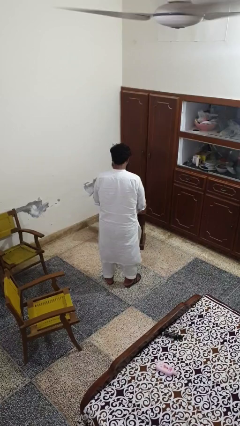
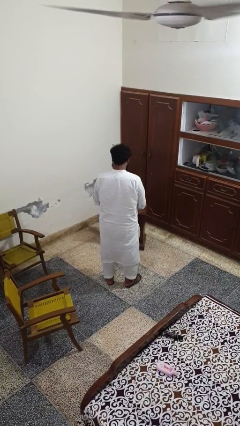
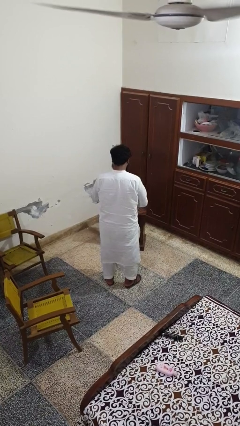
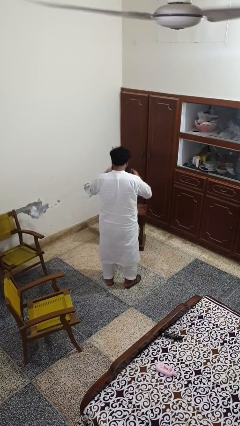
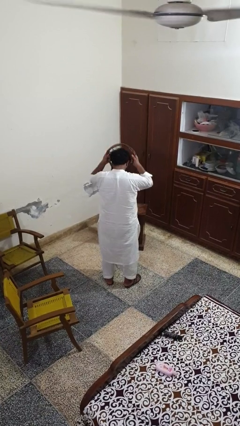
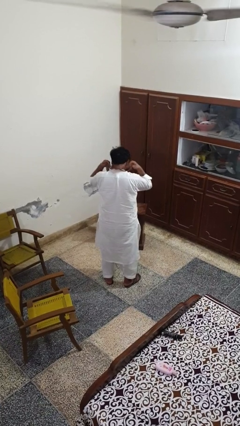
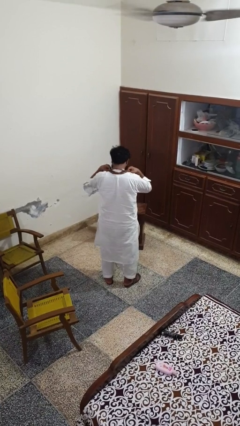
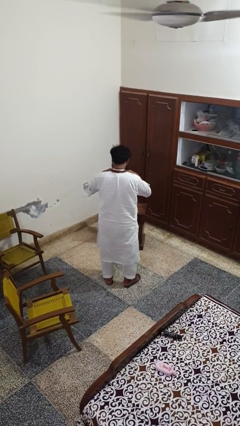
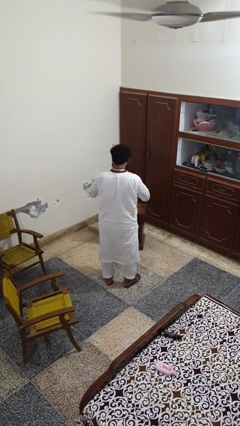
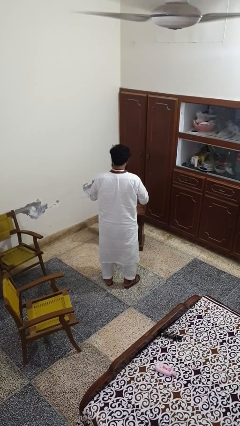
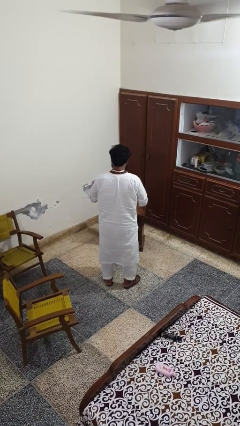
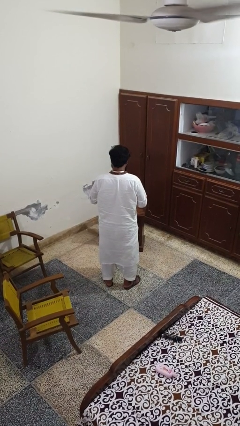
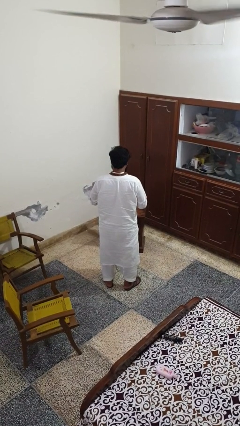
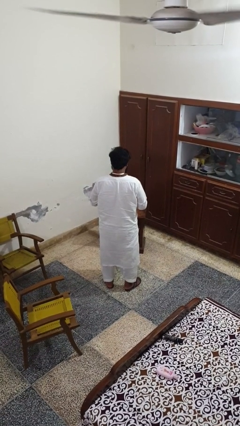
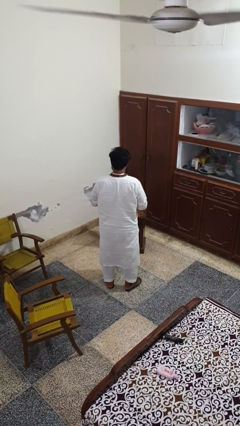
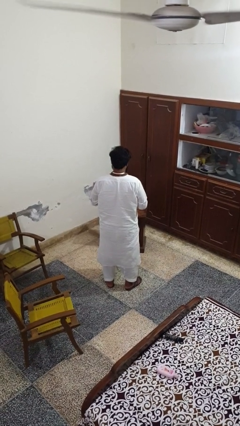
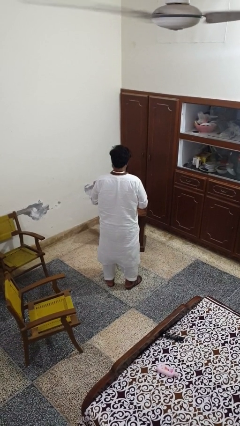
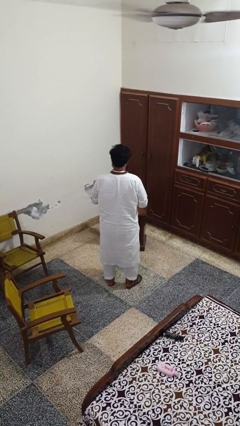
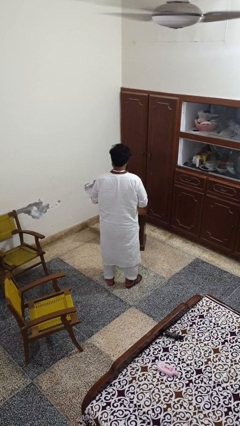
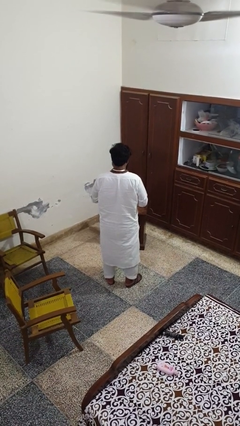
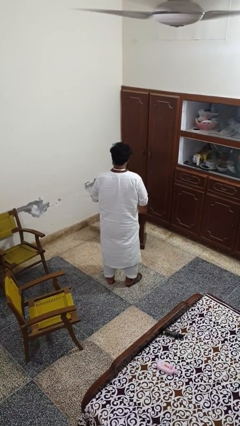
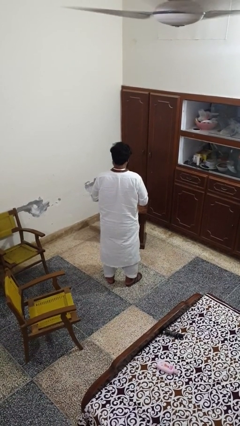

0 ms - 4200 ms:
person puts on necklace

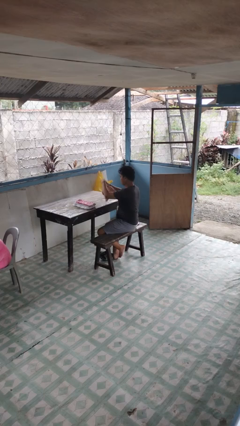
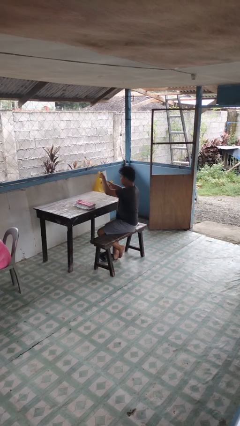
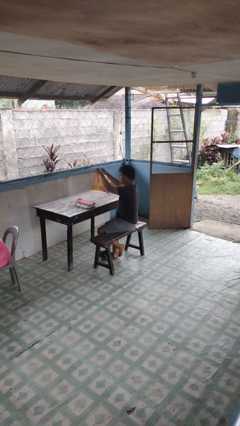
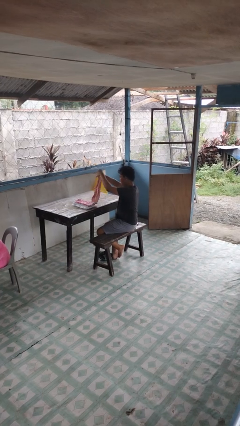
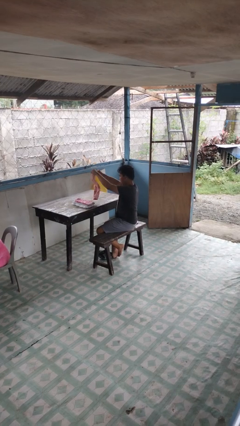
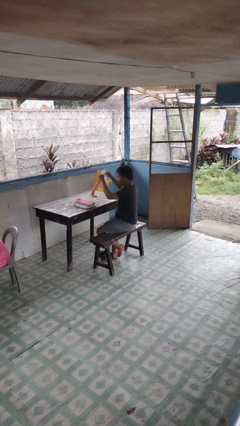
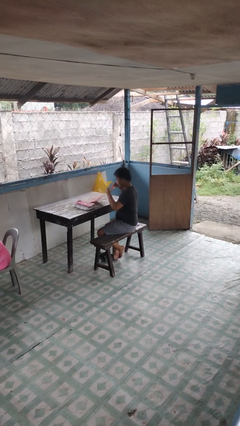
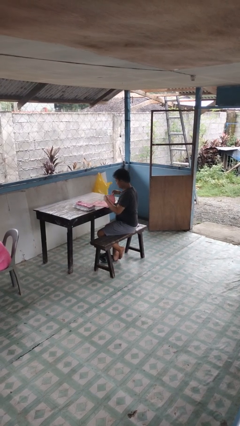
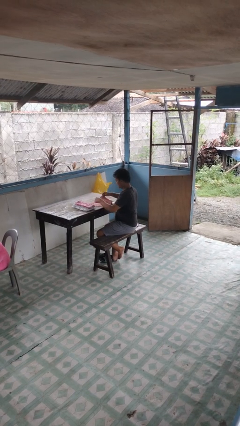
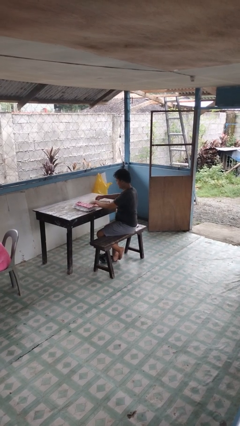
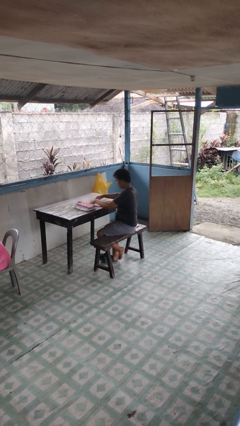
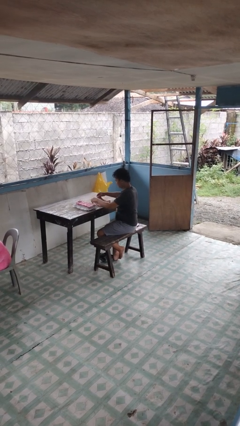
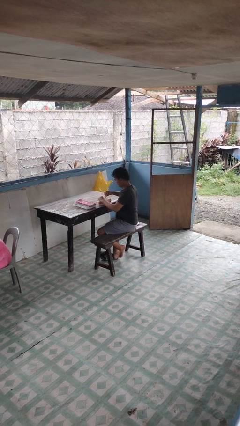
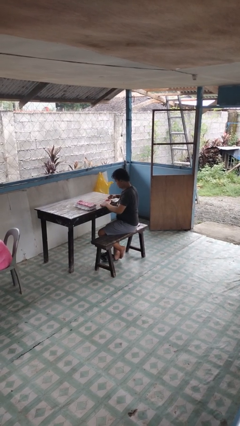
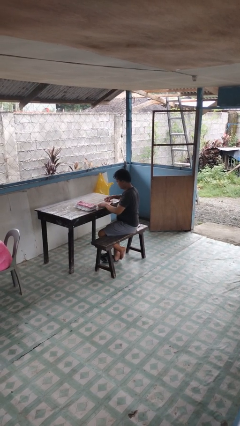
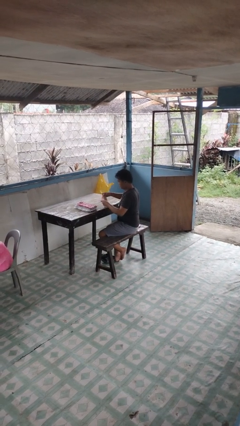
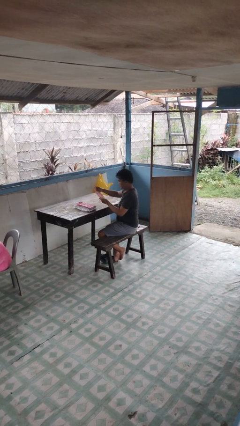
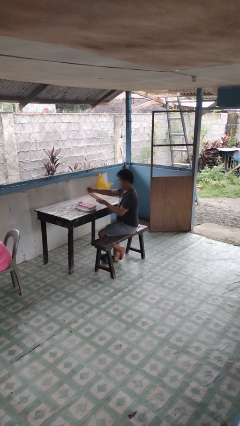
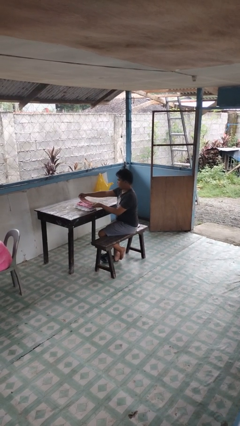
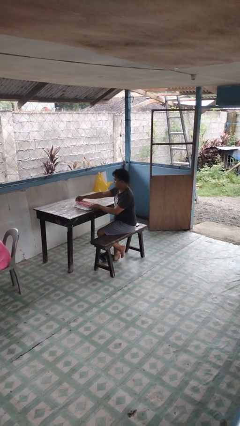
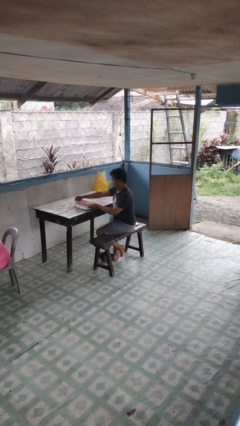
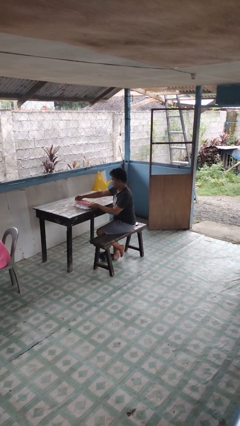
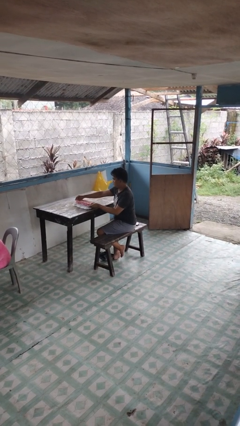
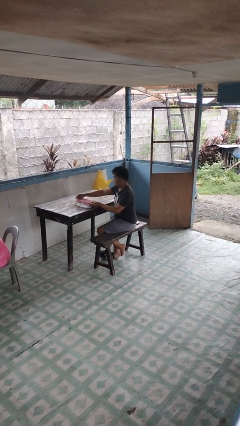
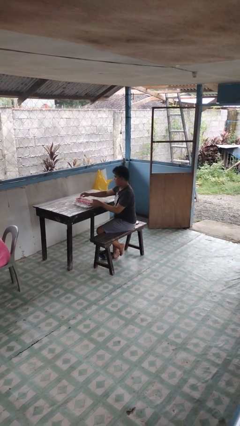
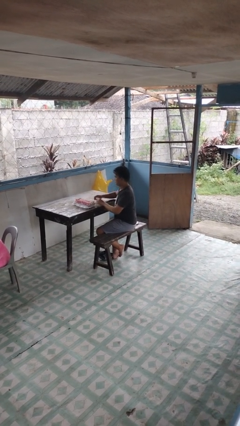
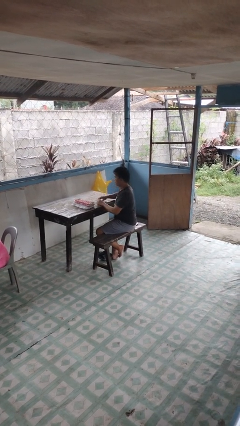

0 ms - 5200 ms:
person folds towel

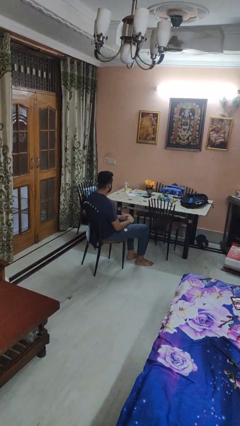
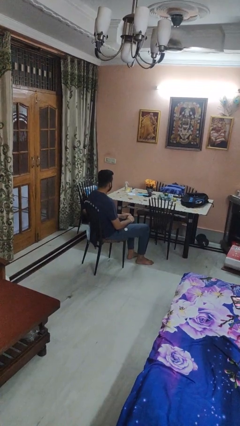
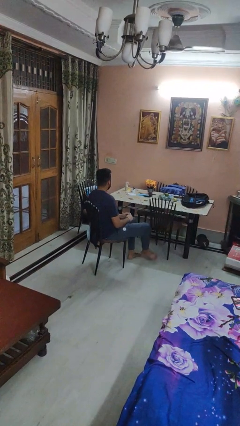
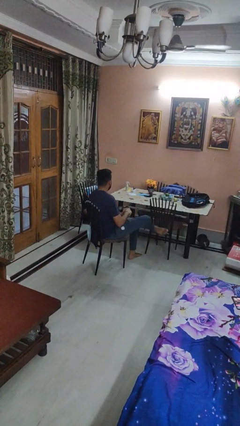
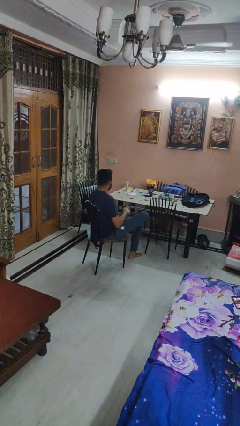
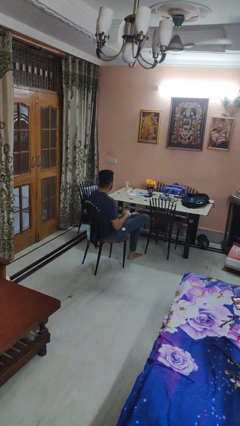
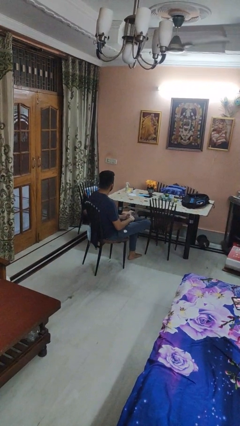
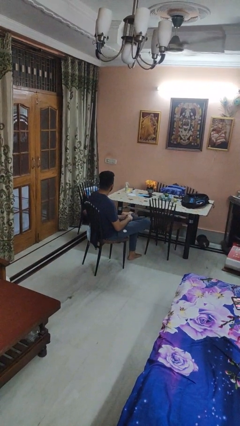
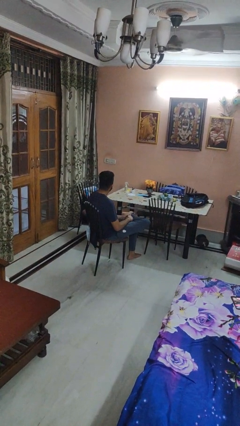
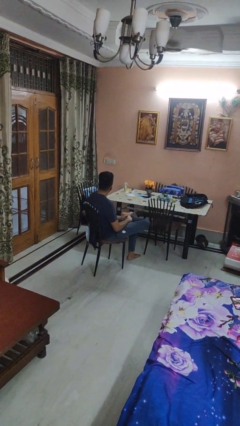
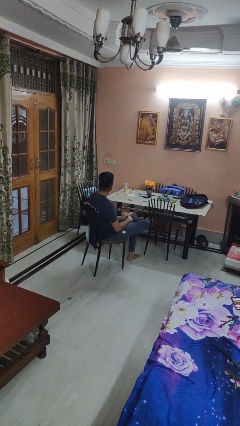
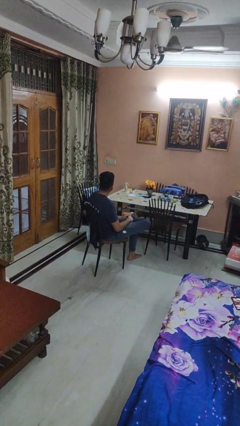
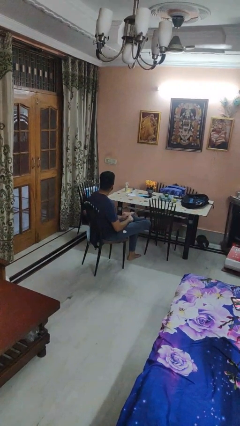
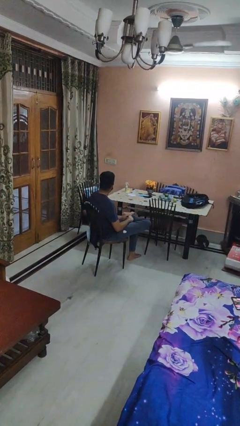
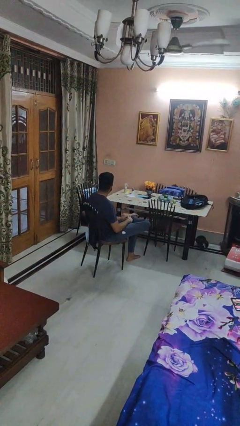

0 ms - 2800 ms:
person crosses legs

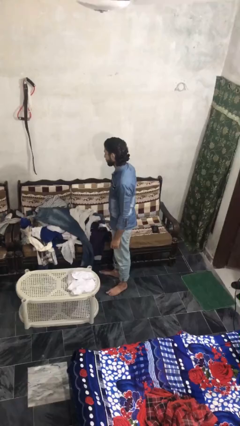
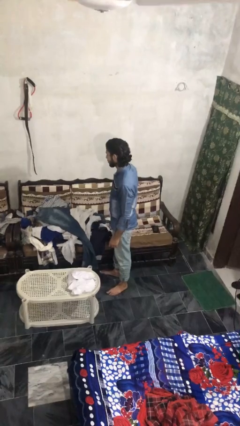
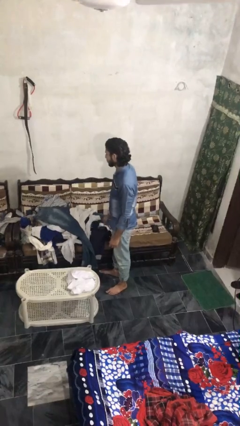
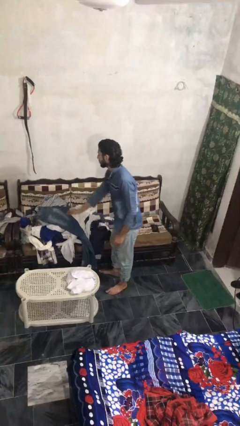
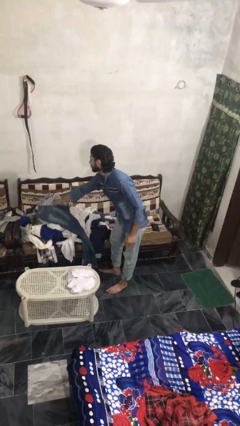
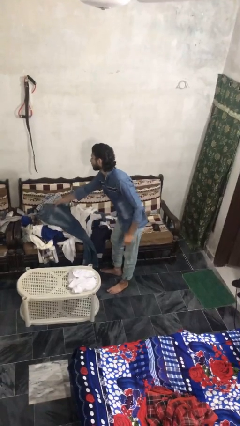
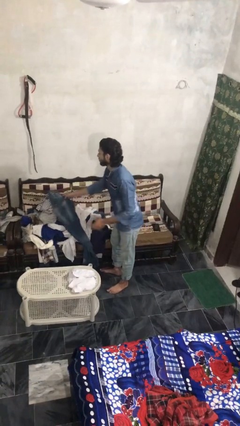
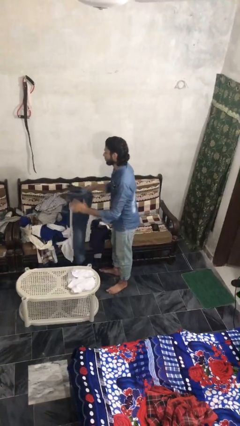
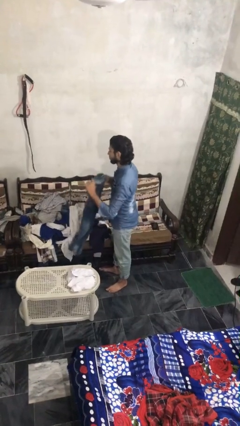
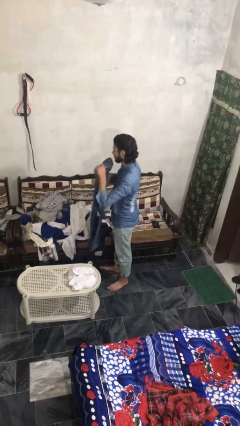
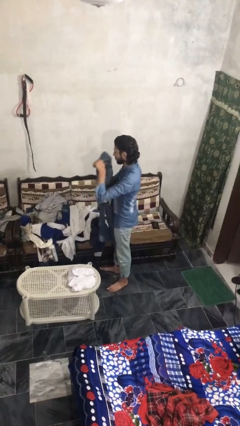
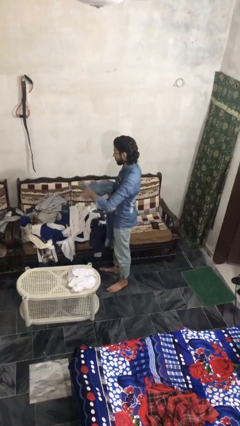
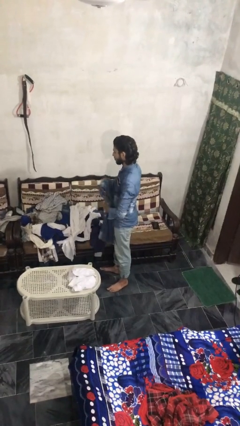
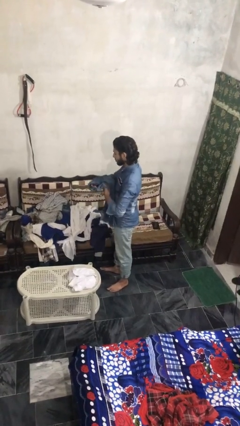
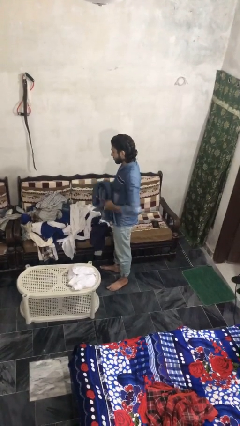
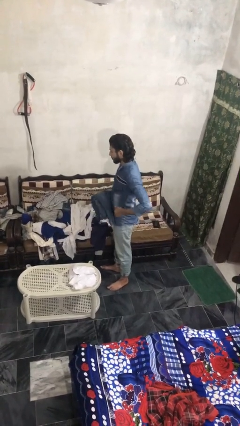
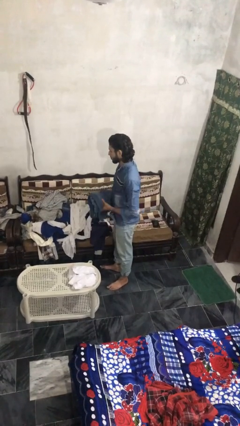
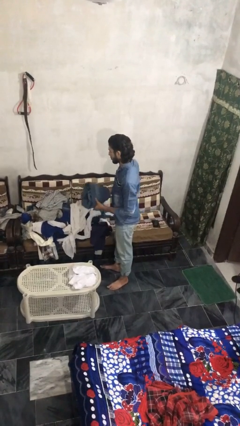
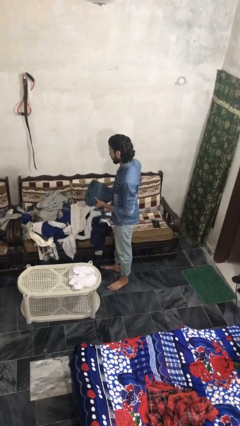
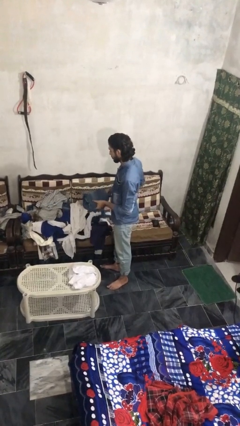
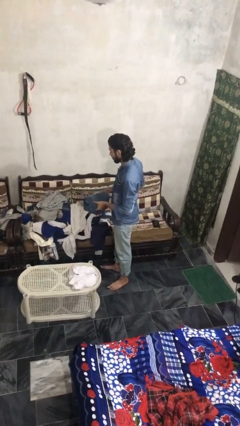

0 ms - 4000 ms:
person folds pants

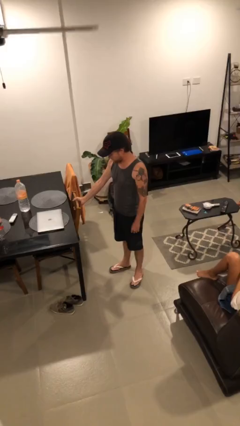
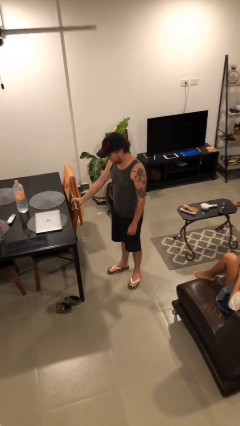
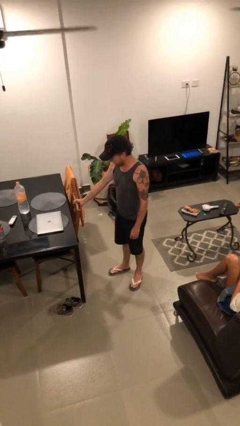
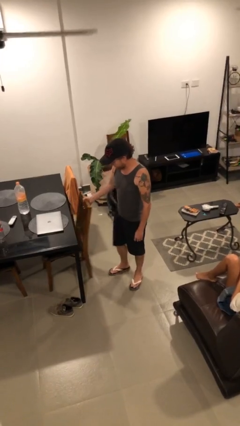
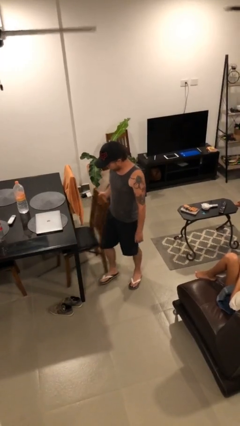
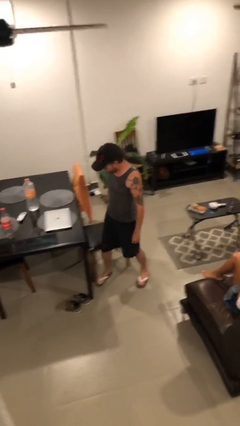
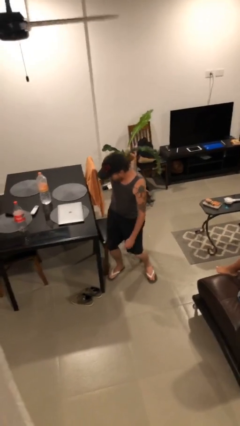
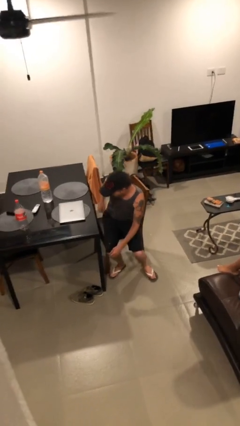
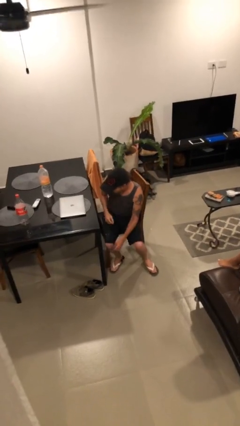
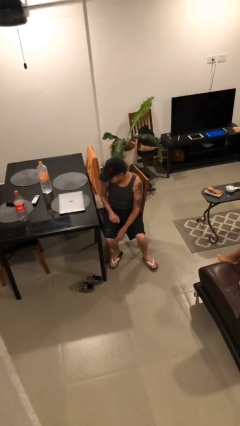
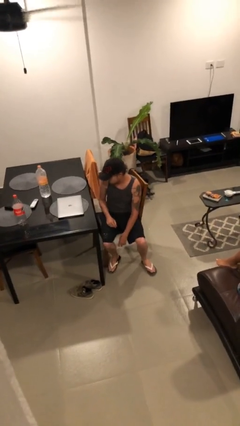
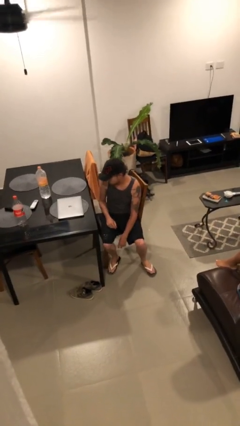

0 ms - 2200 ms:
person sits down
